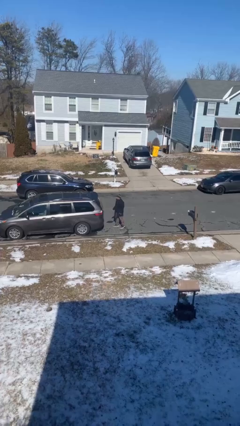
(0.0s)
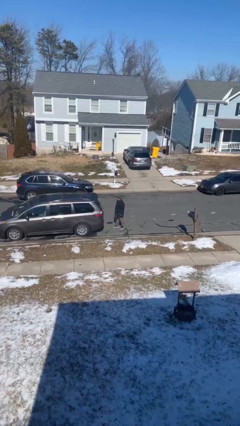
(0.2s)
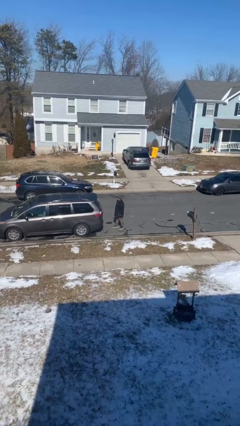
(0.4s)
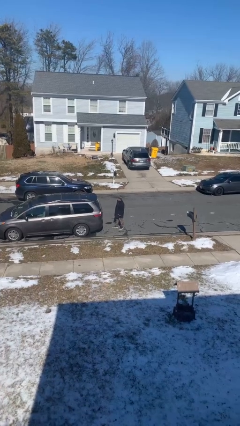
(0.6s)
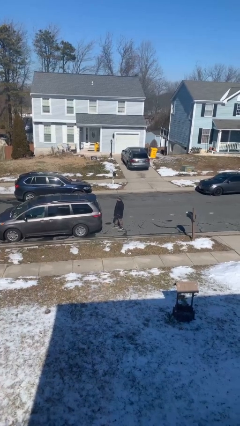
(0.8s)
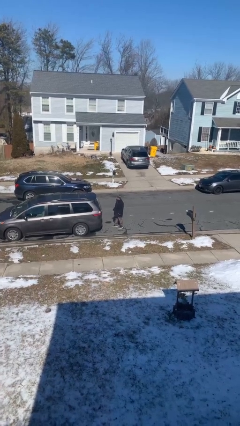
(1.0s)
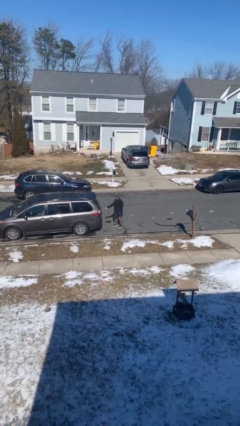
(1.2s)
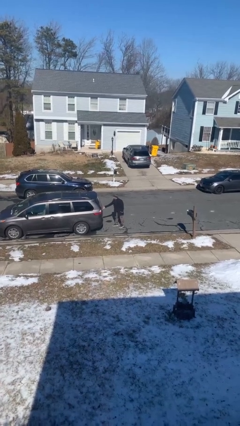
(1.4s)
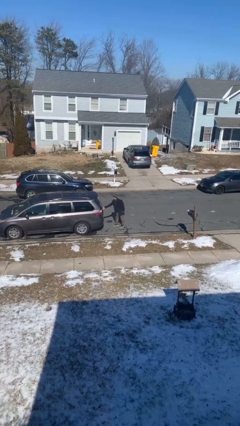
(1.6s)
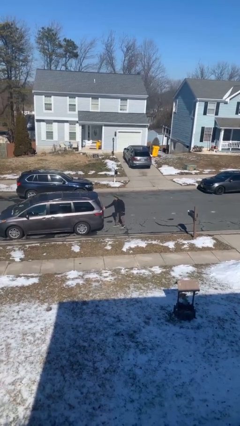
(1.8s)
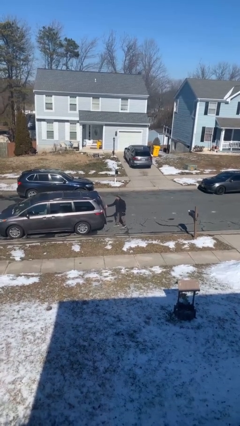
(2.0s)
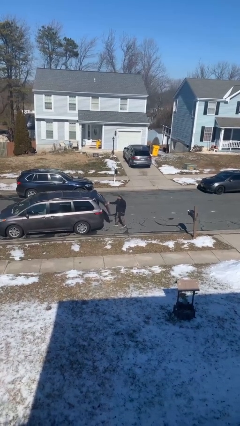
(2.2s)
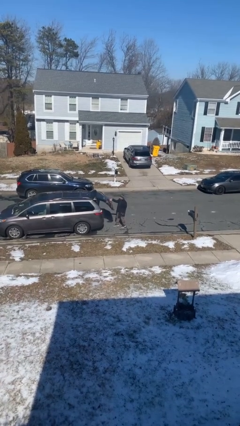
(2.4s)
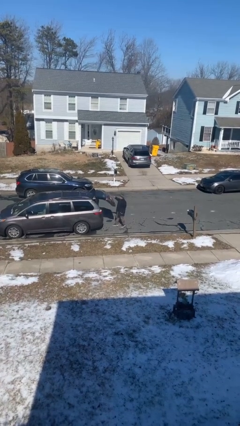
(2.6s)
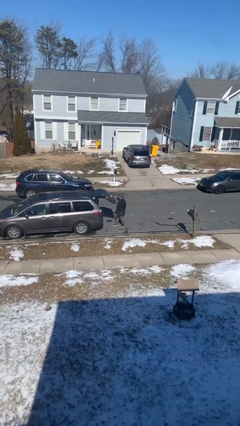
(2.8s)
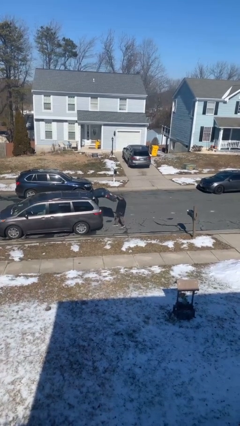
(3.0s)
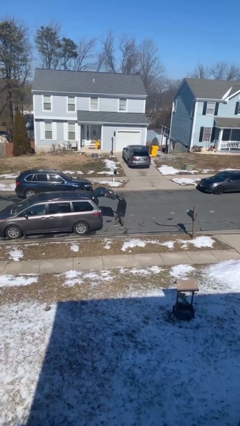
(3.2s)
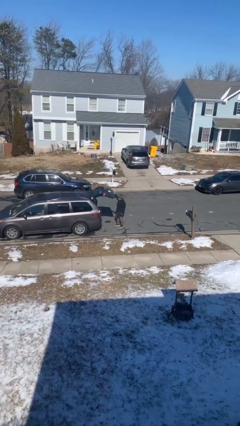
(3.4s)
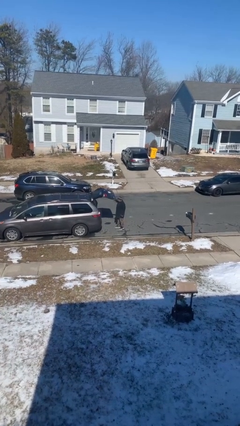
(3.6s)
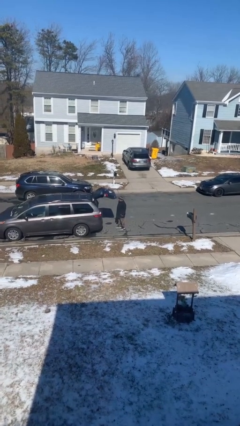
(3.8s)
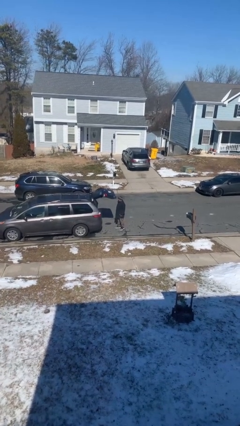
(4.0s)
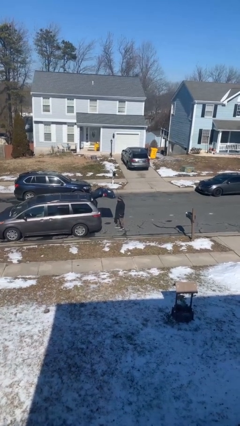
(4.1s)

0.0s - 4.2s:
person opens car trunk

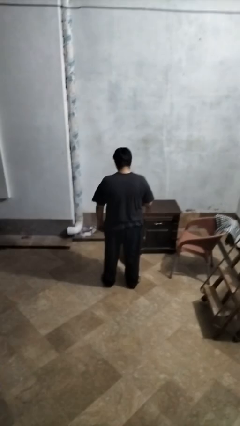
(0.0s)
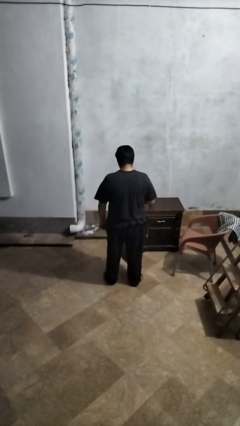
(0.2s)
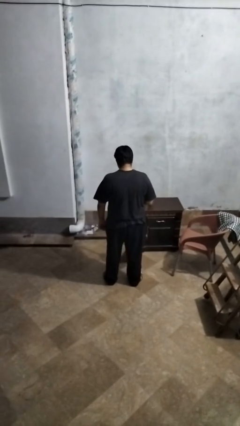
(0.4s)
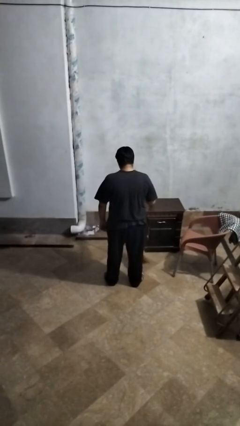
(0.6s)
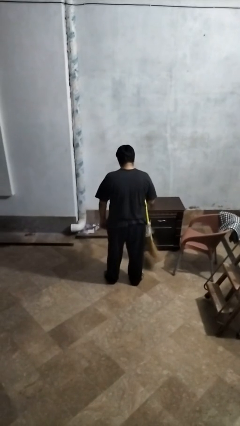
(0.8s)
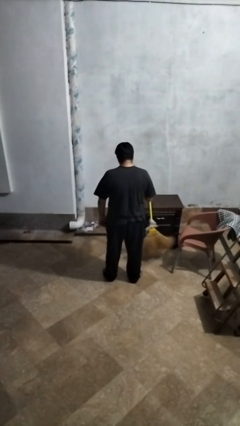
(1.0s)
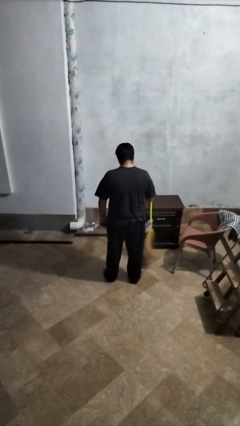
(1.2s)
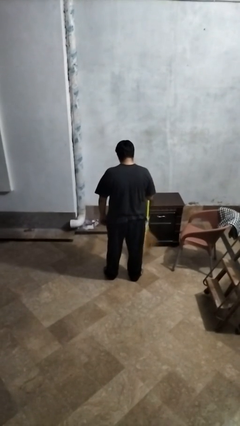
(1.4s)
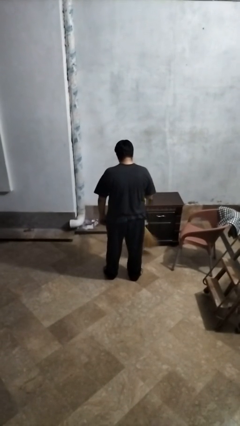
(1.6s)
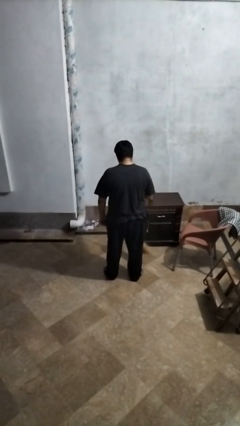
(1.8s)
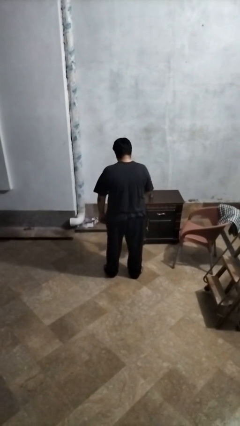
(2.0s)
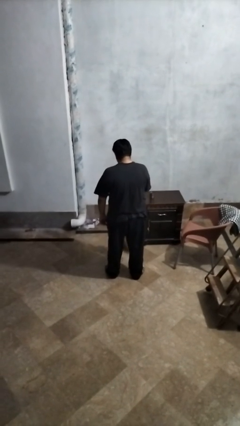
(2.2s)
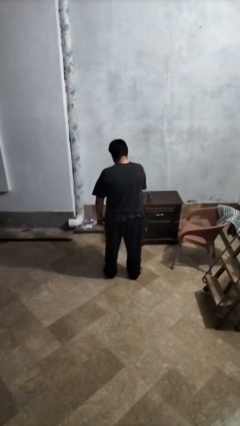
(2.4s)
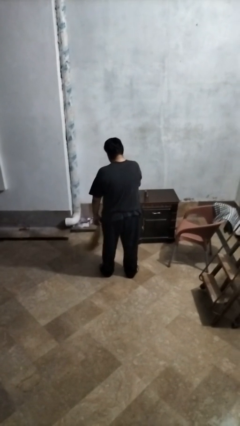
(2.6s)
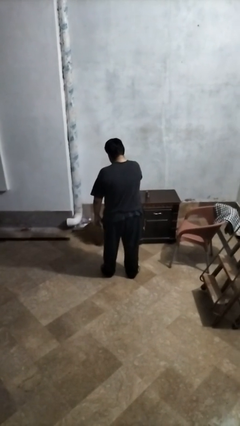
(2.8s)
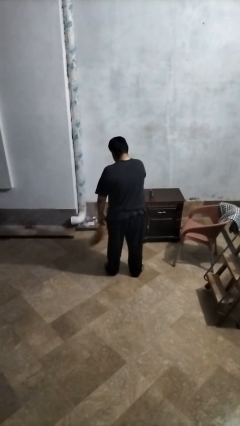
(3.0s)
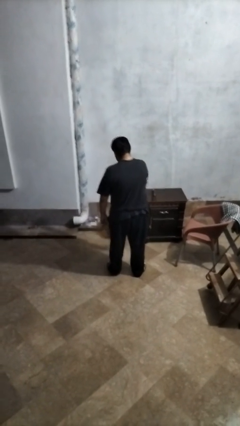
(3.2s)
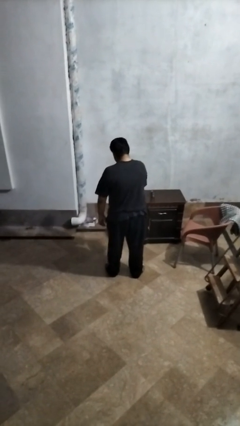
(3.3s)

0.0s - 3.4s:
person mops

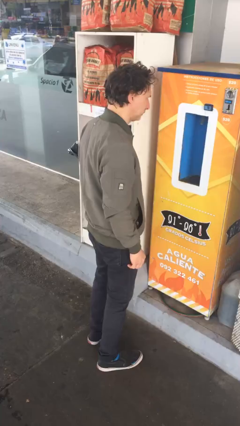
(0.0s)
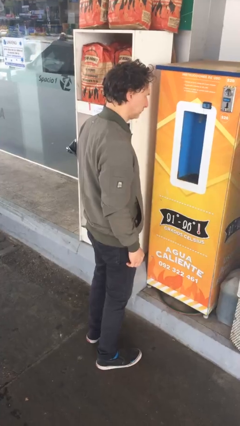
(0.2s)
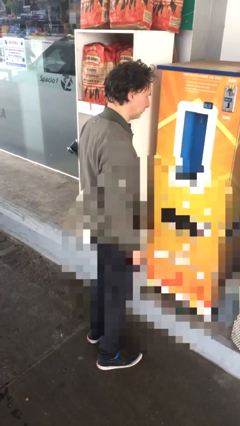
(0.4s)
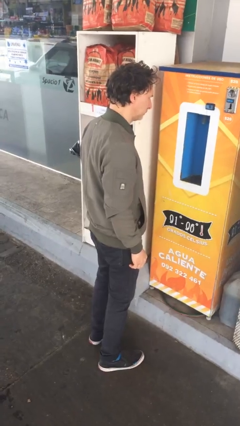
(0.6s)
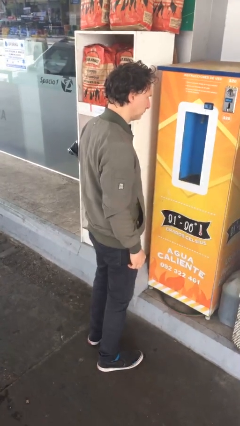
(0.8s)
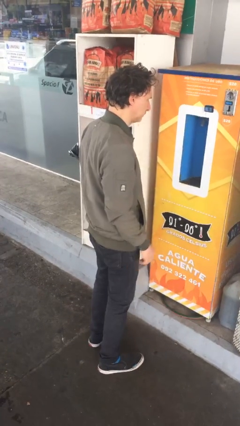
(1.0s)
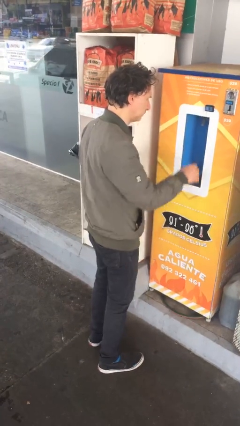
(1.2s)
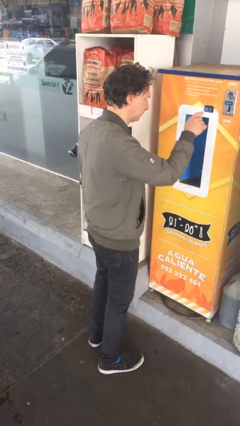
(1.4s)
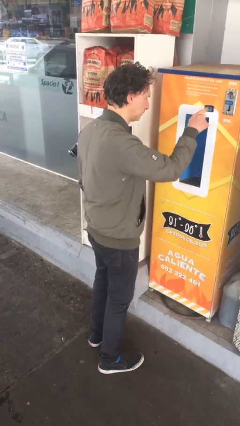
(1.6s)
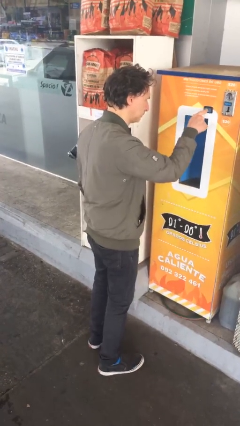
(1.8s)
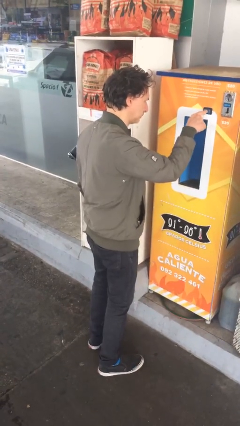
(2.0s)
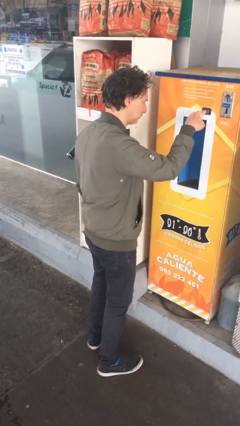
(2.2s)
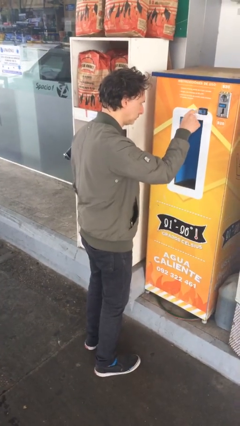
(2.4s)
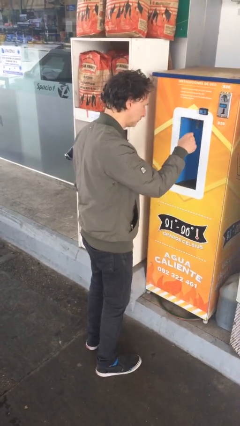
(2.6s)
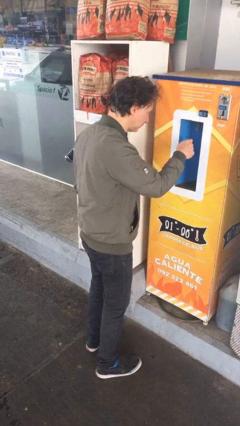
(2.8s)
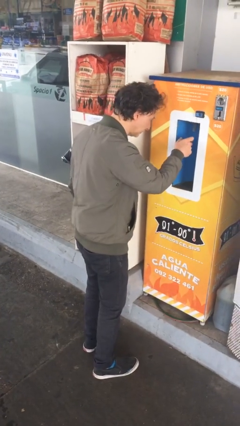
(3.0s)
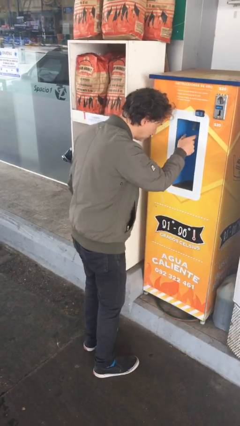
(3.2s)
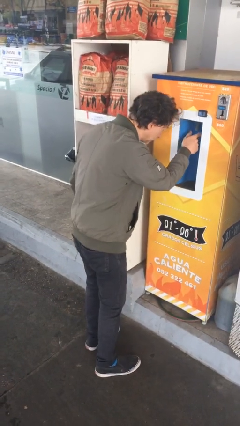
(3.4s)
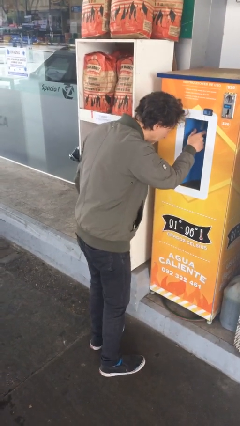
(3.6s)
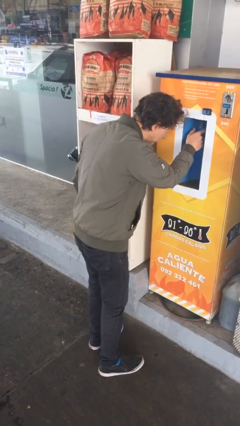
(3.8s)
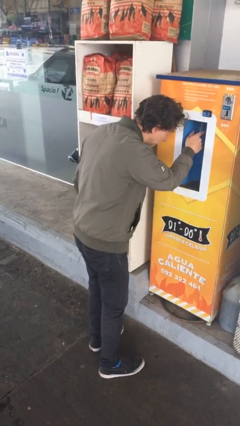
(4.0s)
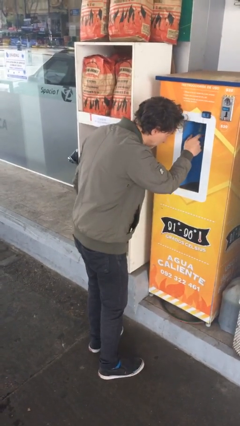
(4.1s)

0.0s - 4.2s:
person purchases from machine

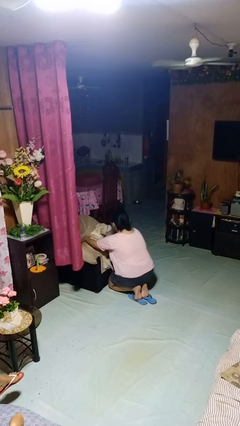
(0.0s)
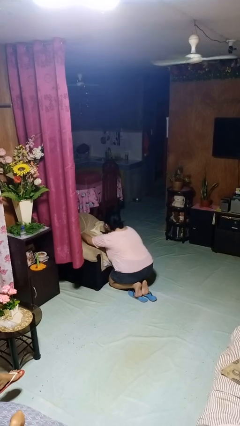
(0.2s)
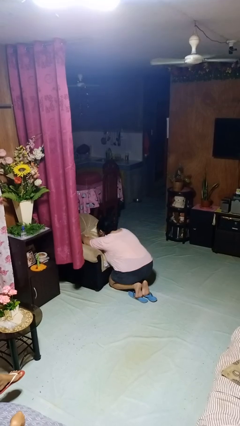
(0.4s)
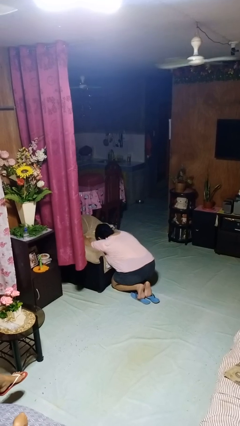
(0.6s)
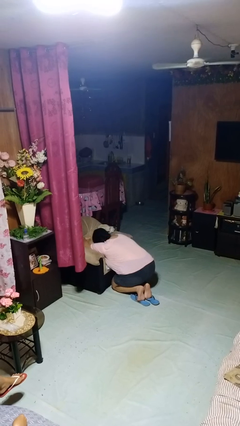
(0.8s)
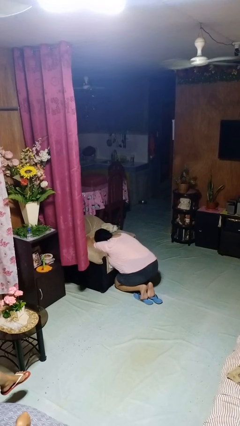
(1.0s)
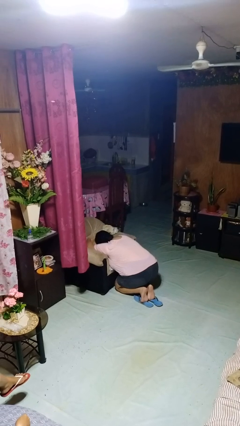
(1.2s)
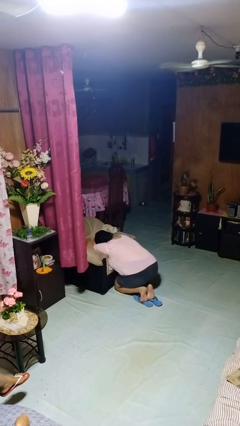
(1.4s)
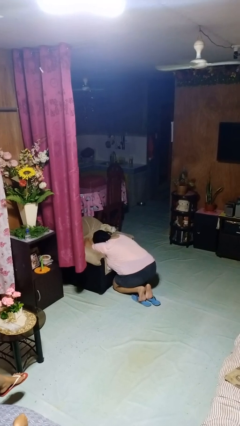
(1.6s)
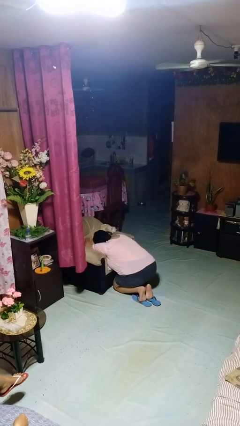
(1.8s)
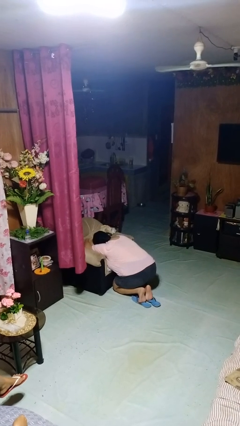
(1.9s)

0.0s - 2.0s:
person hugs dog

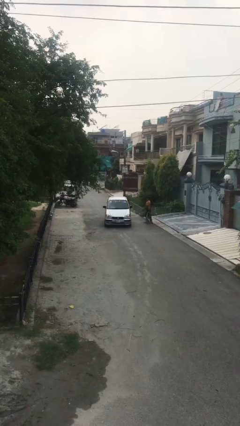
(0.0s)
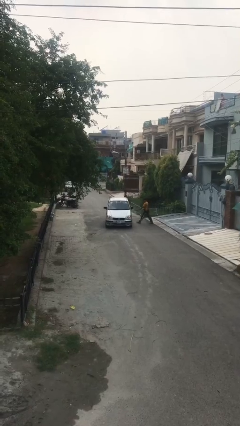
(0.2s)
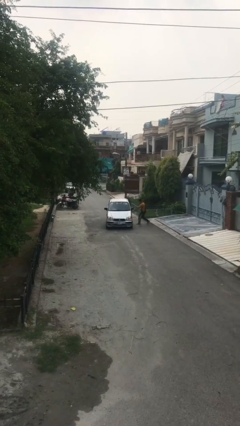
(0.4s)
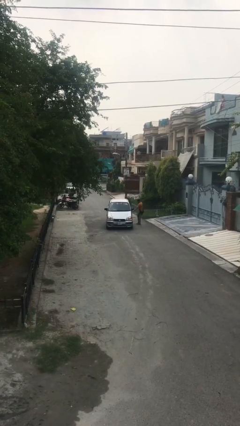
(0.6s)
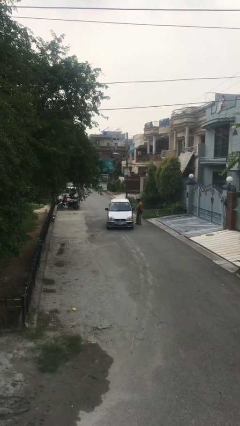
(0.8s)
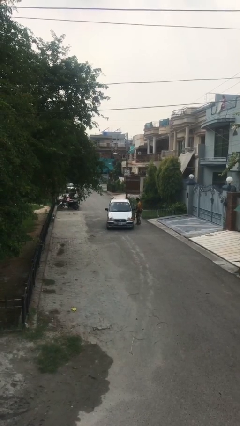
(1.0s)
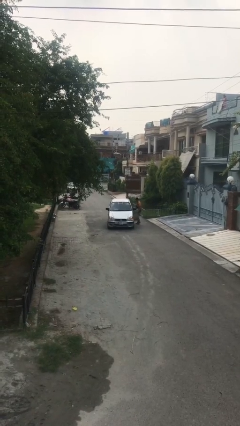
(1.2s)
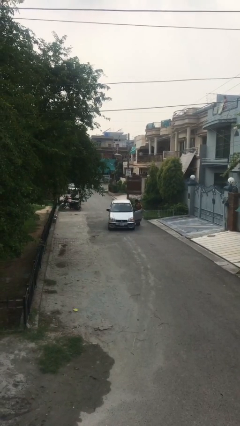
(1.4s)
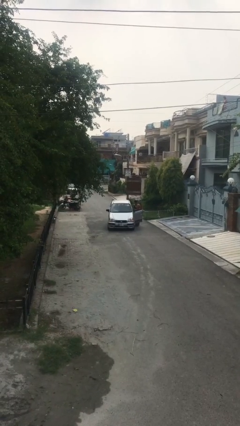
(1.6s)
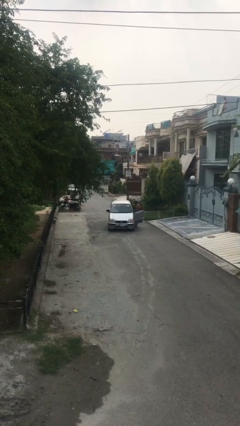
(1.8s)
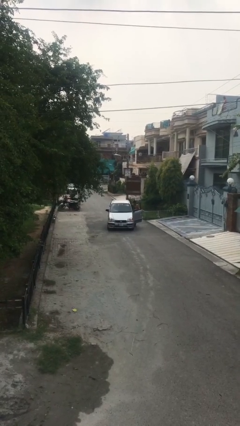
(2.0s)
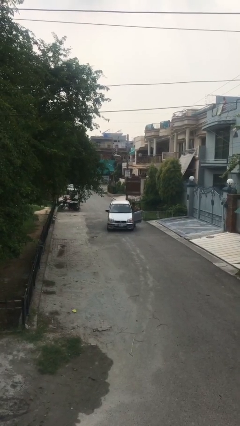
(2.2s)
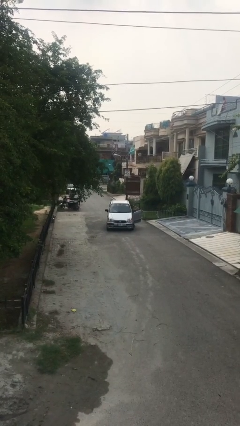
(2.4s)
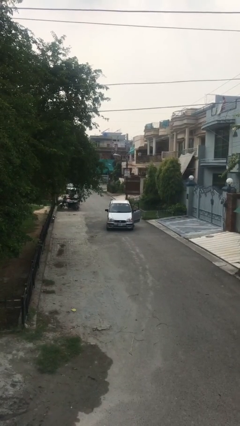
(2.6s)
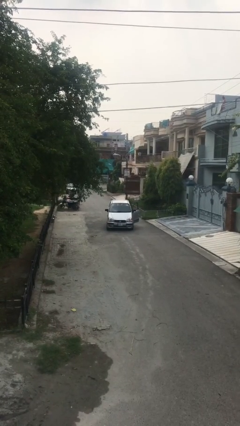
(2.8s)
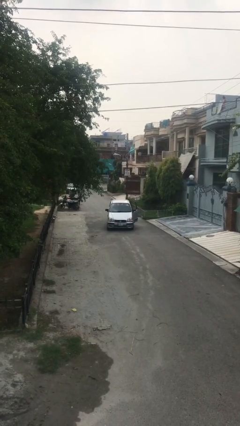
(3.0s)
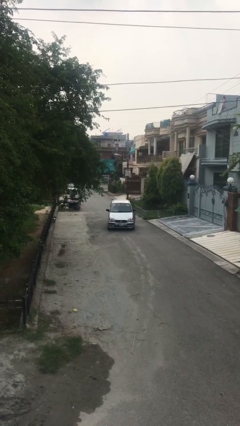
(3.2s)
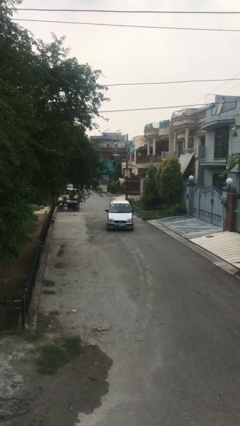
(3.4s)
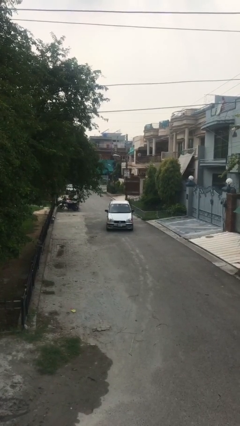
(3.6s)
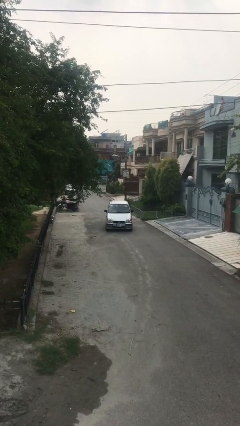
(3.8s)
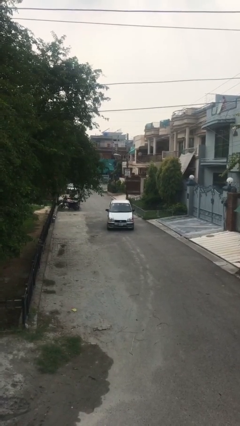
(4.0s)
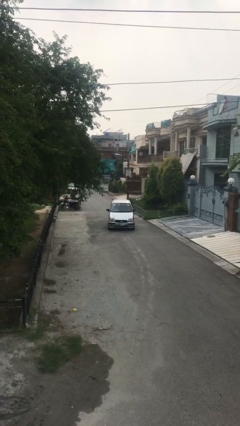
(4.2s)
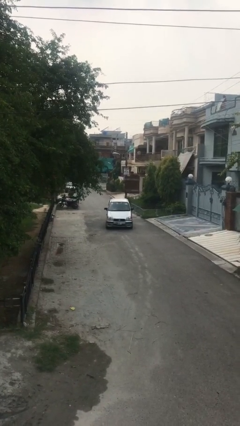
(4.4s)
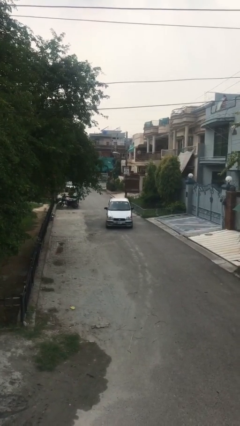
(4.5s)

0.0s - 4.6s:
car picks up person
